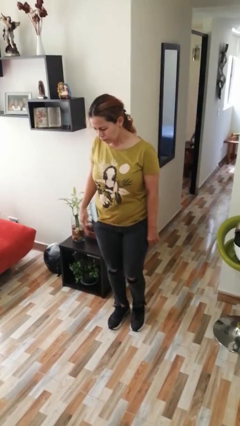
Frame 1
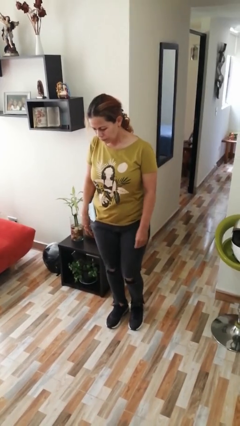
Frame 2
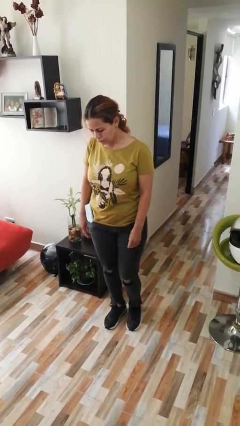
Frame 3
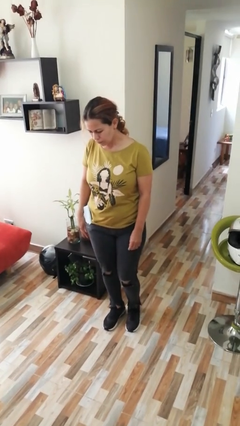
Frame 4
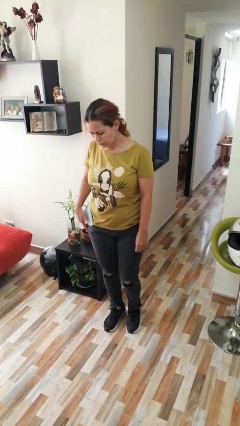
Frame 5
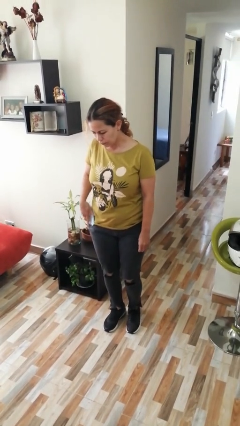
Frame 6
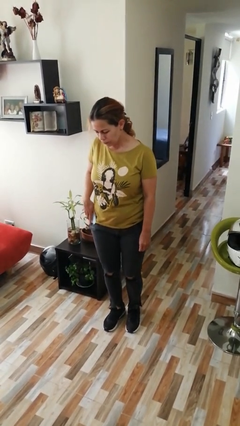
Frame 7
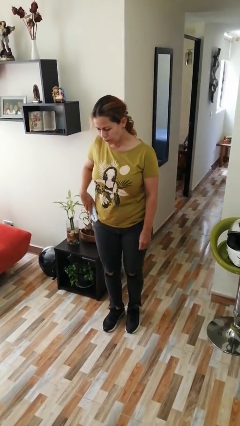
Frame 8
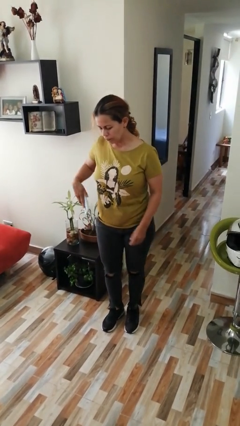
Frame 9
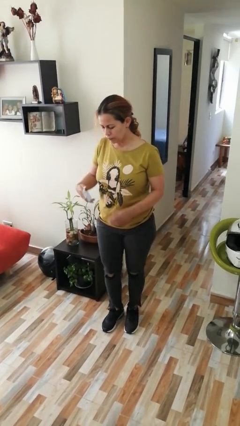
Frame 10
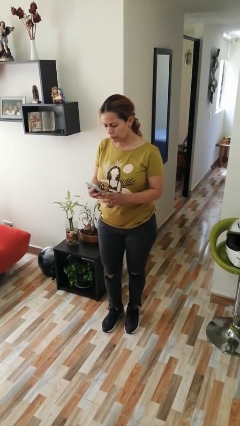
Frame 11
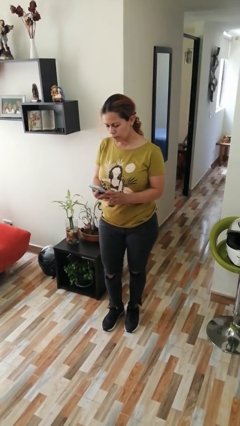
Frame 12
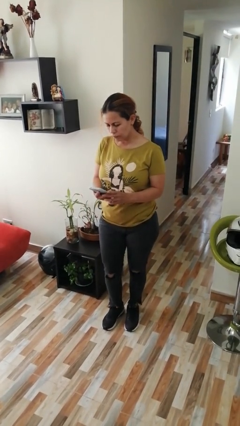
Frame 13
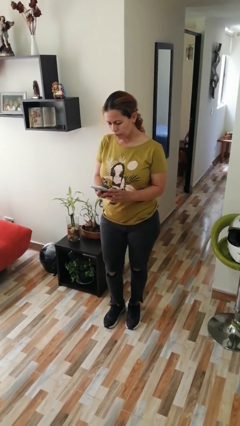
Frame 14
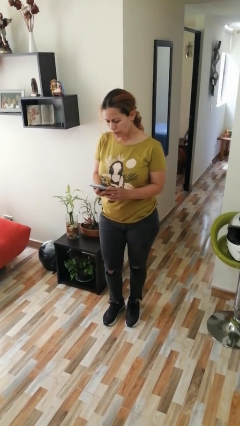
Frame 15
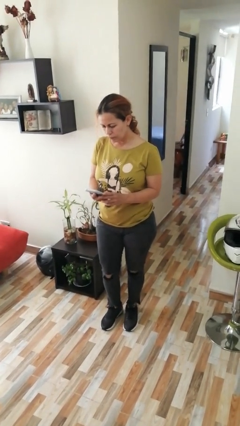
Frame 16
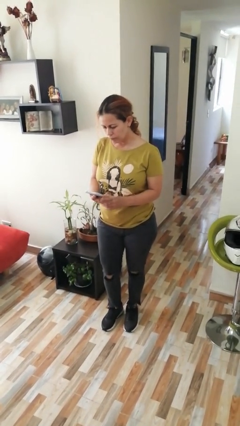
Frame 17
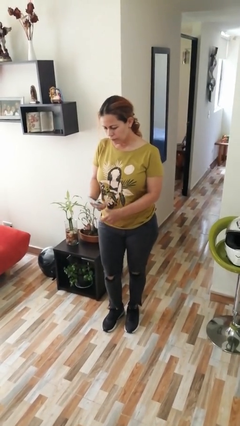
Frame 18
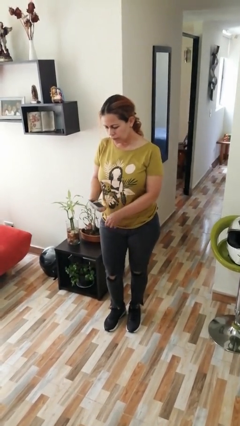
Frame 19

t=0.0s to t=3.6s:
person puts phone into pocket

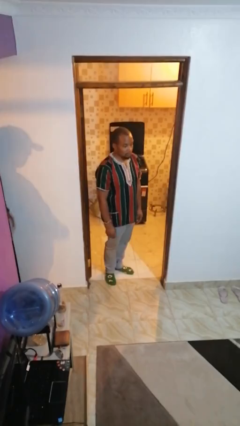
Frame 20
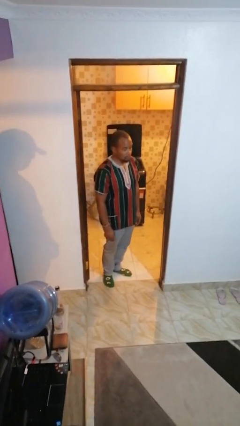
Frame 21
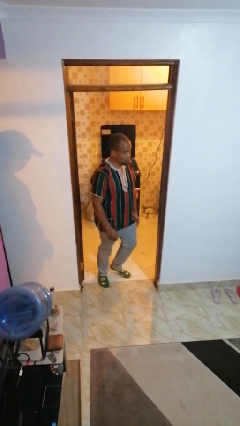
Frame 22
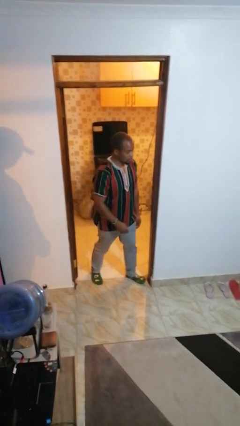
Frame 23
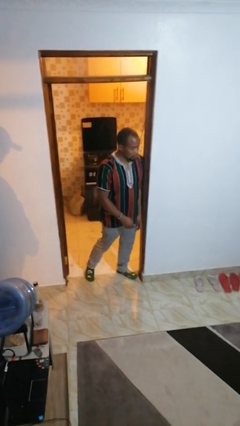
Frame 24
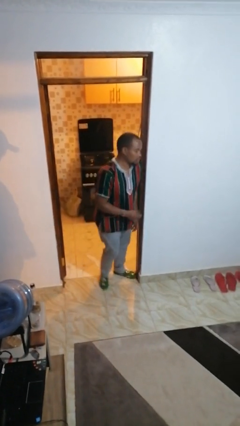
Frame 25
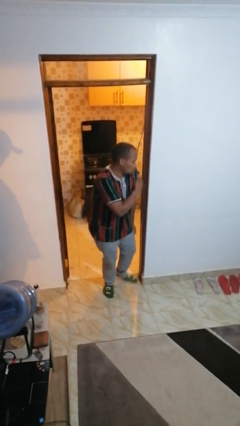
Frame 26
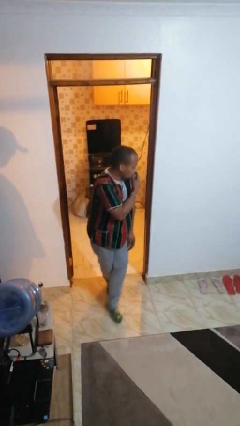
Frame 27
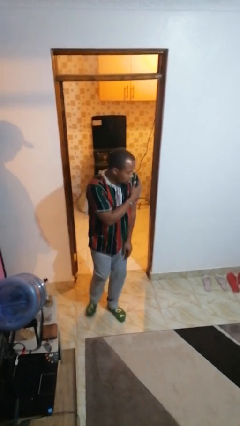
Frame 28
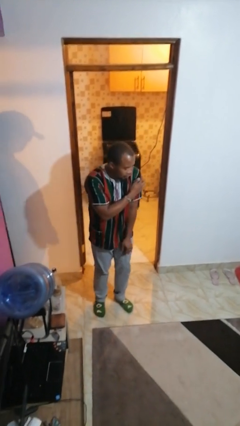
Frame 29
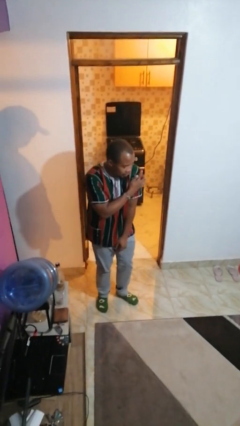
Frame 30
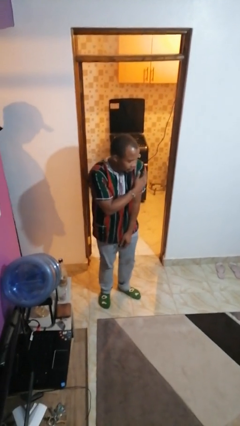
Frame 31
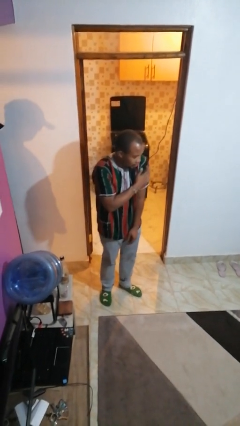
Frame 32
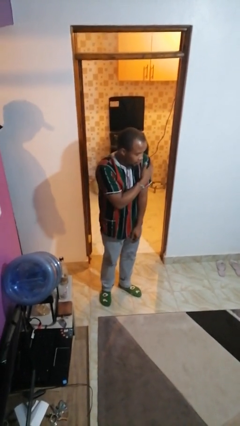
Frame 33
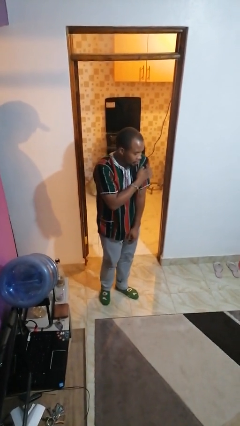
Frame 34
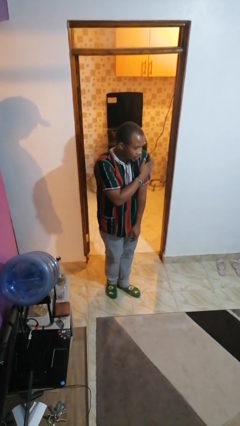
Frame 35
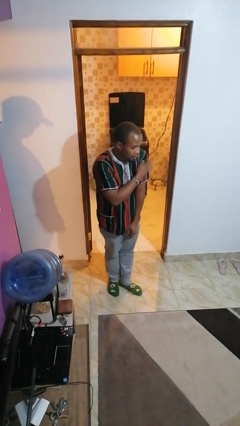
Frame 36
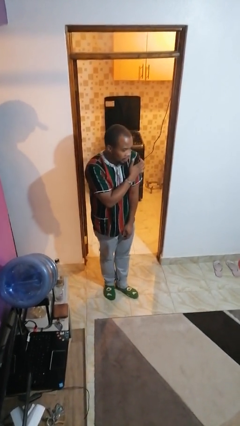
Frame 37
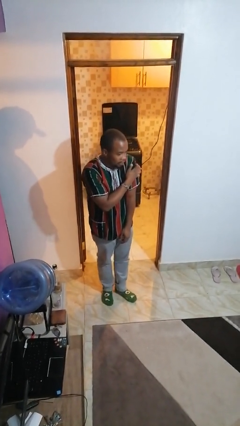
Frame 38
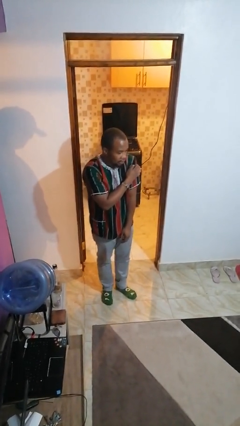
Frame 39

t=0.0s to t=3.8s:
person bumps into wall

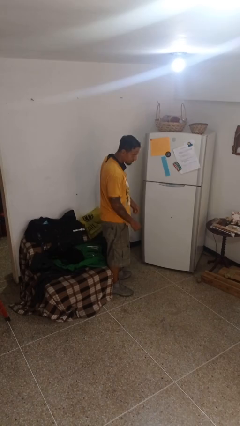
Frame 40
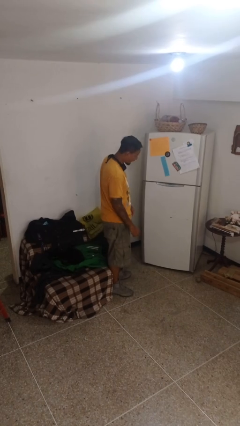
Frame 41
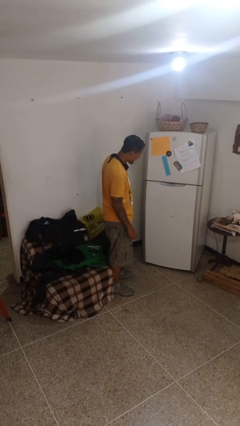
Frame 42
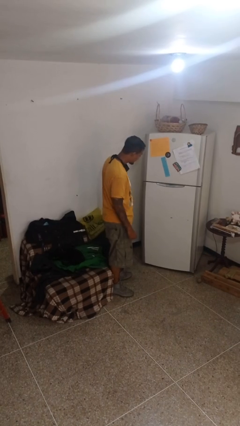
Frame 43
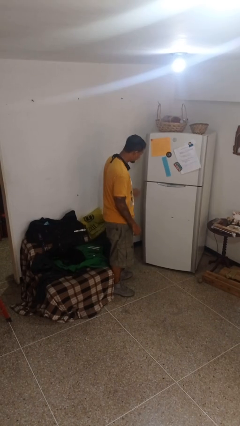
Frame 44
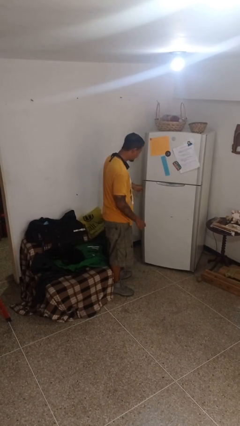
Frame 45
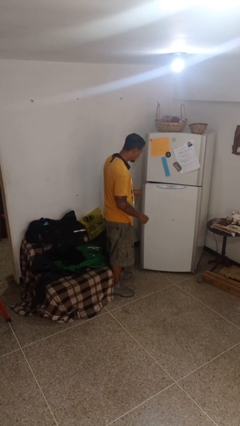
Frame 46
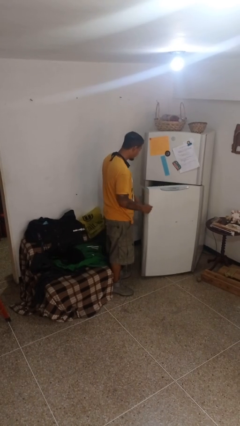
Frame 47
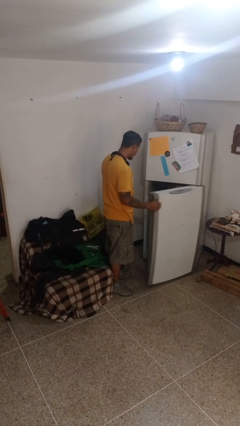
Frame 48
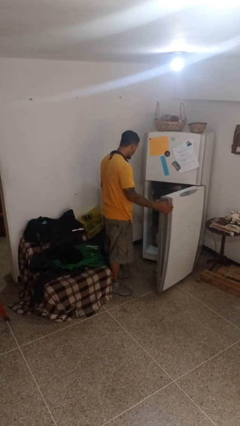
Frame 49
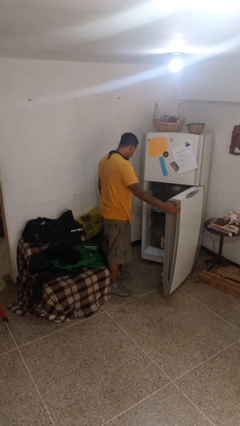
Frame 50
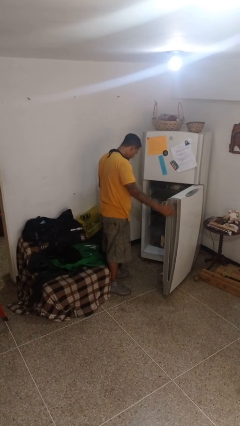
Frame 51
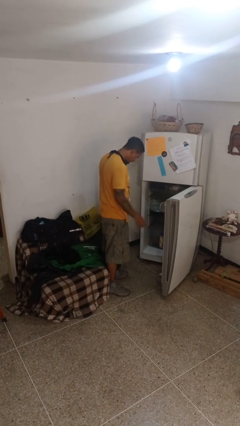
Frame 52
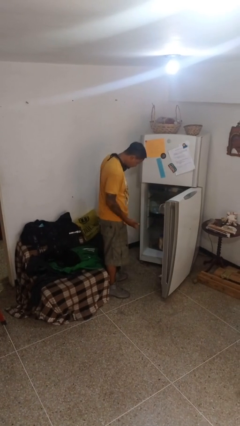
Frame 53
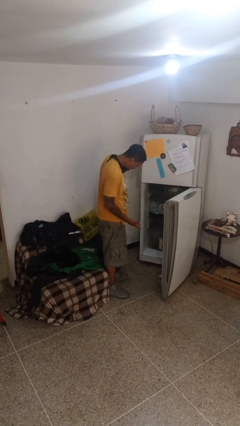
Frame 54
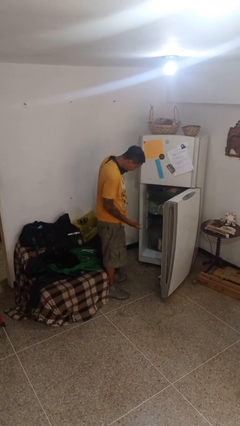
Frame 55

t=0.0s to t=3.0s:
person opens refrigerator

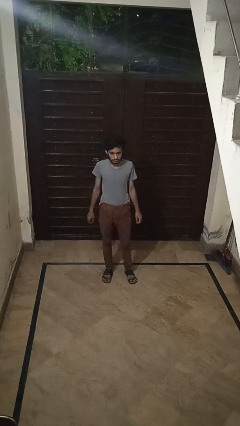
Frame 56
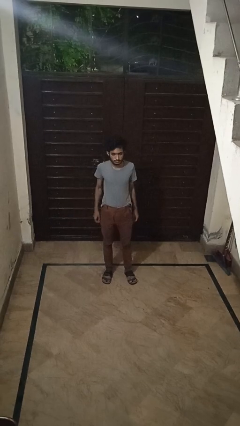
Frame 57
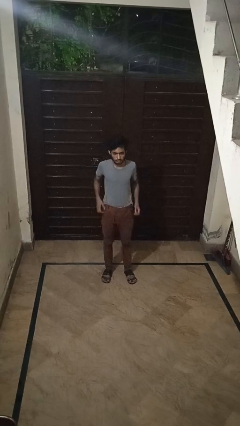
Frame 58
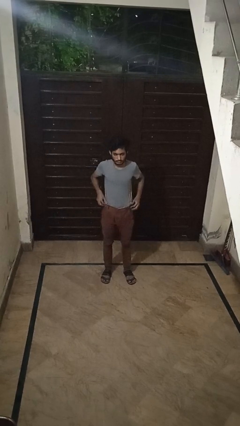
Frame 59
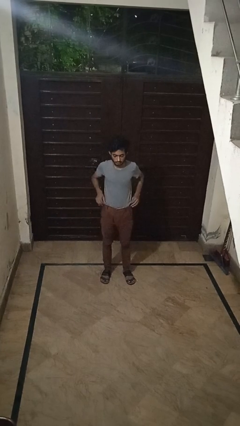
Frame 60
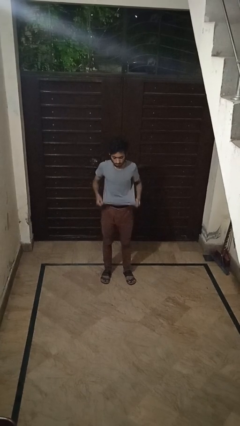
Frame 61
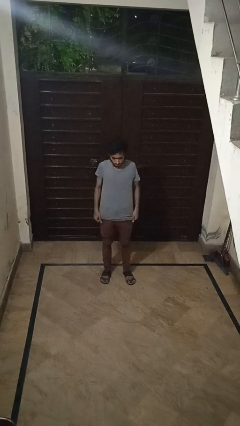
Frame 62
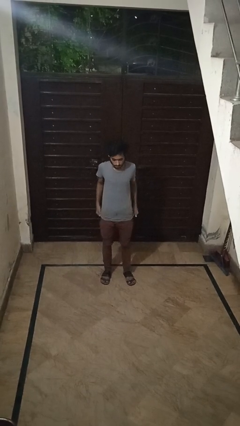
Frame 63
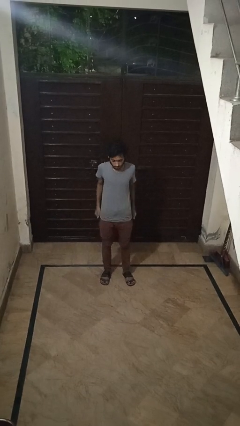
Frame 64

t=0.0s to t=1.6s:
person untucks shirt

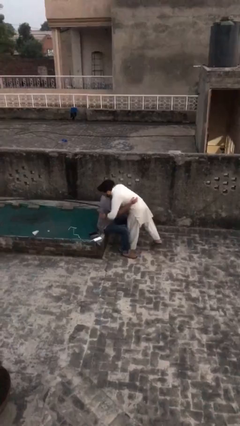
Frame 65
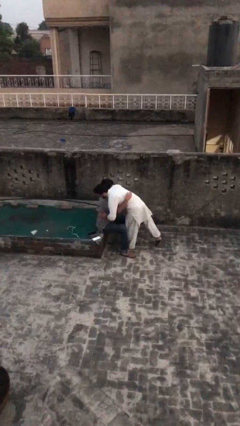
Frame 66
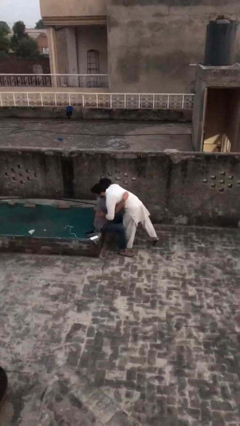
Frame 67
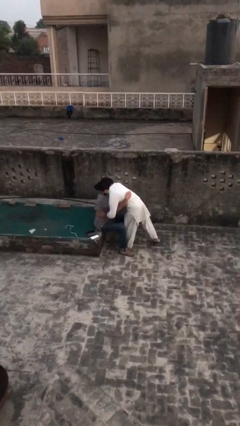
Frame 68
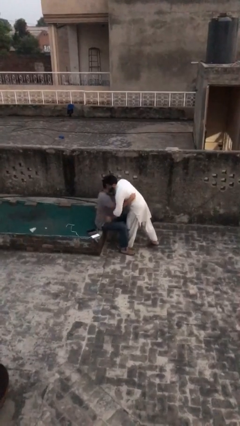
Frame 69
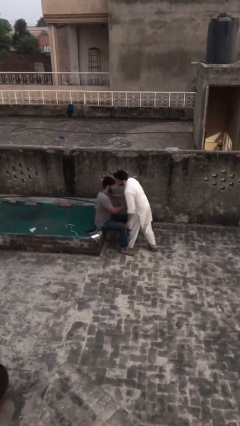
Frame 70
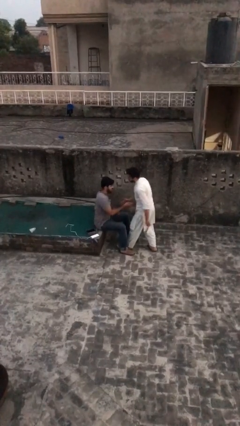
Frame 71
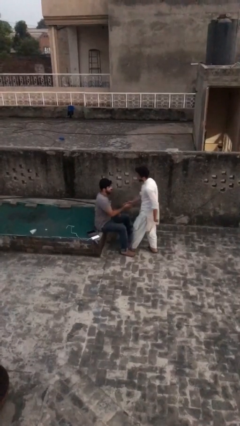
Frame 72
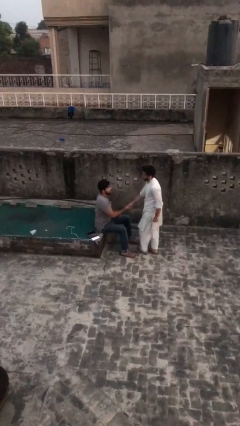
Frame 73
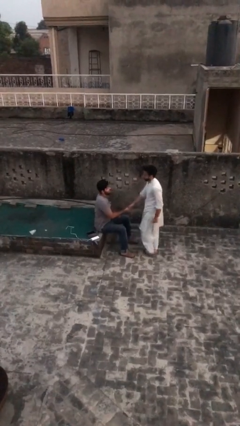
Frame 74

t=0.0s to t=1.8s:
person embraces person

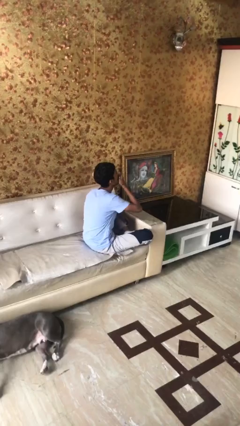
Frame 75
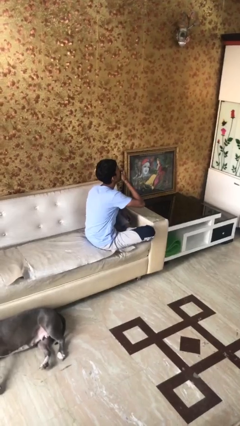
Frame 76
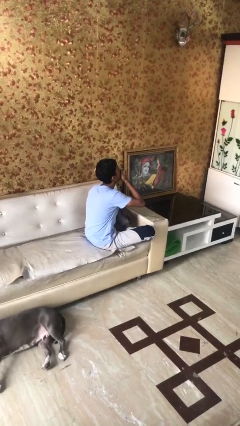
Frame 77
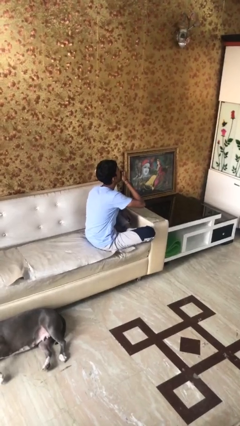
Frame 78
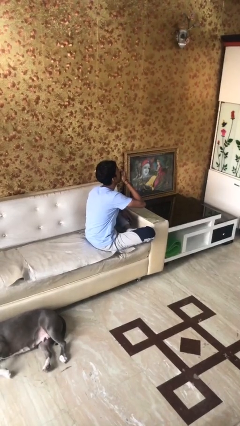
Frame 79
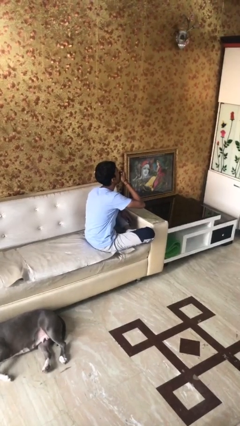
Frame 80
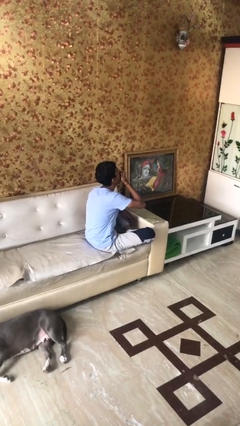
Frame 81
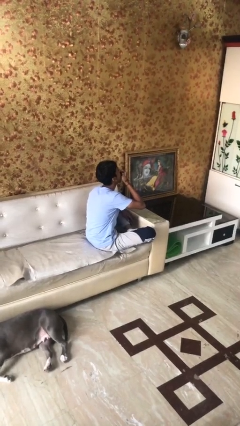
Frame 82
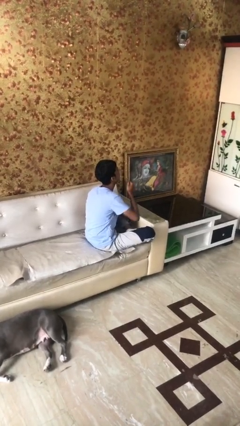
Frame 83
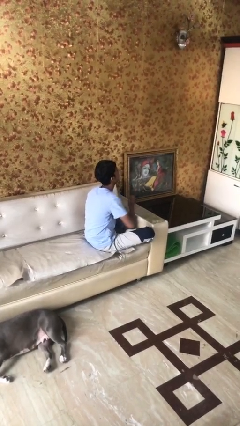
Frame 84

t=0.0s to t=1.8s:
person yawns

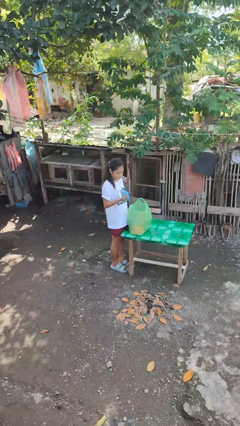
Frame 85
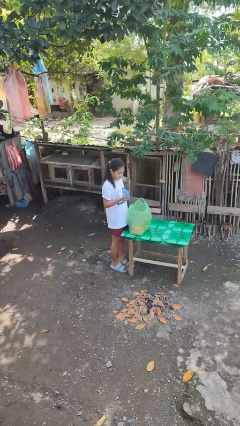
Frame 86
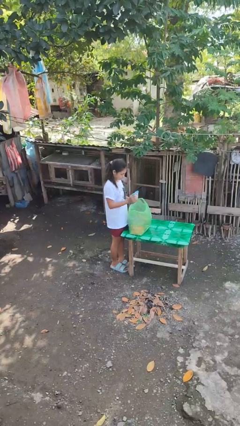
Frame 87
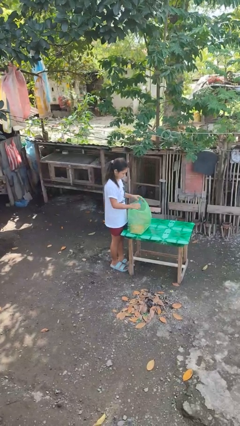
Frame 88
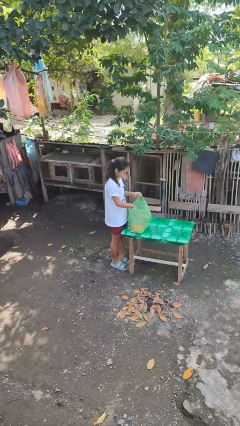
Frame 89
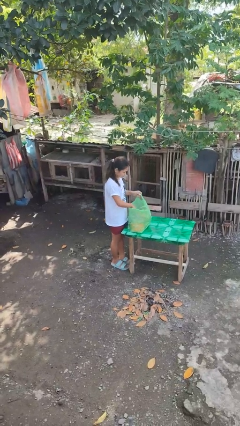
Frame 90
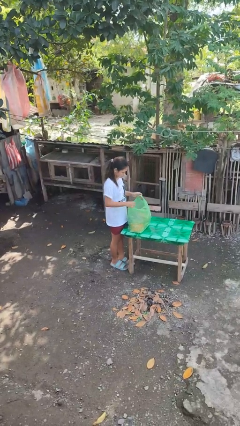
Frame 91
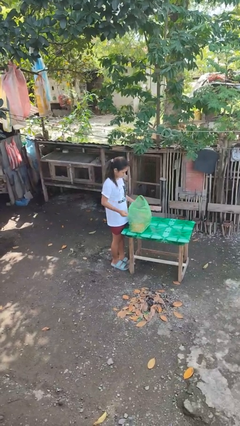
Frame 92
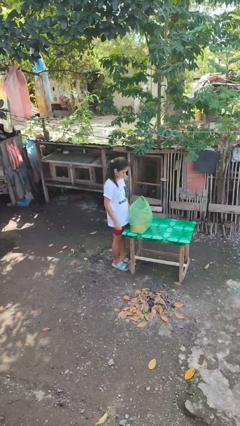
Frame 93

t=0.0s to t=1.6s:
person puts object into bag
